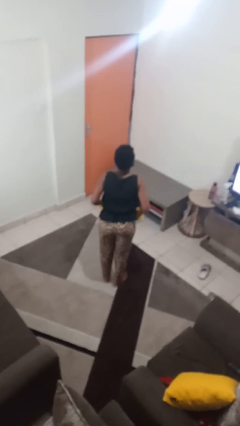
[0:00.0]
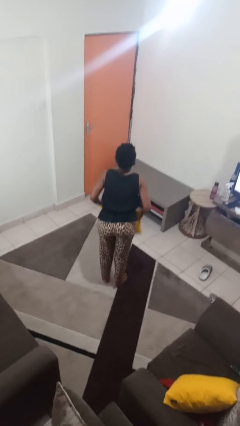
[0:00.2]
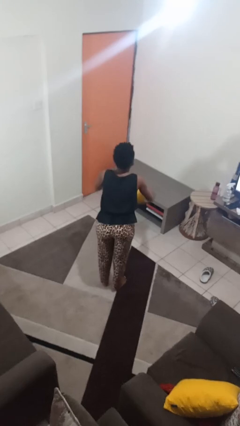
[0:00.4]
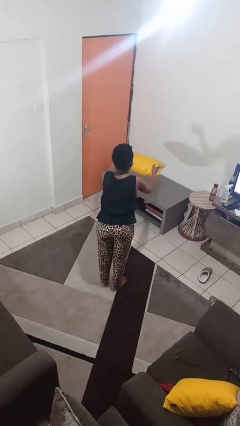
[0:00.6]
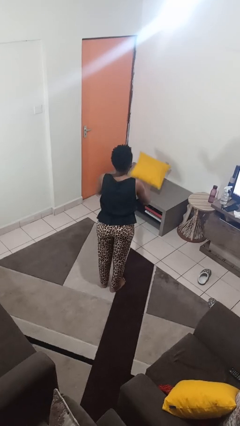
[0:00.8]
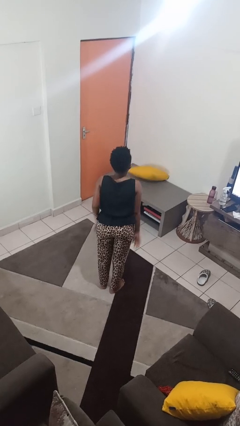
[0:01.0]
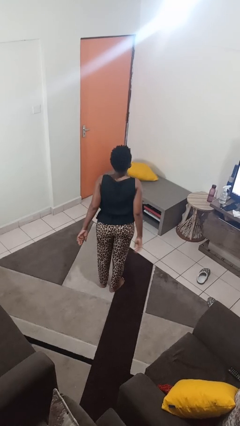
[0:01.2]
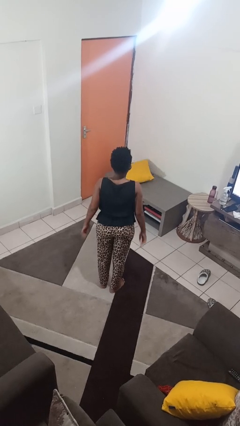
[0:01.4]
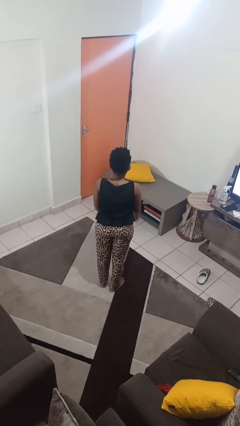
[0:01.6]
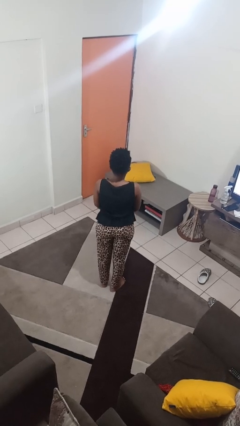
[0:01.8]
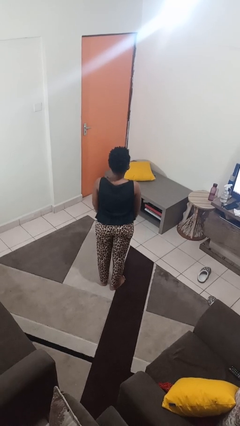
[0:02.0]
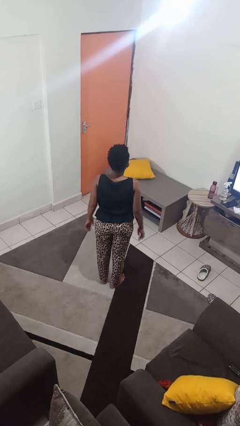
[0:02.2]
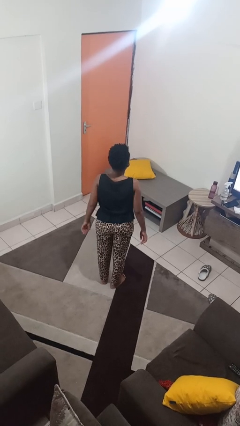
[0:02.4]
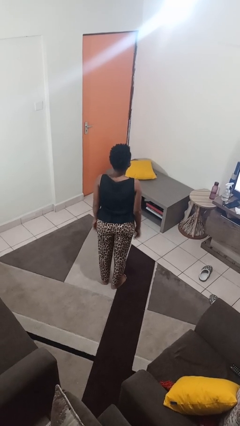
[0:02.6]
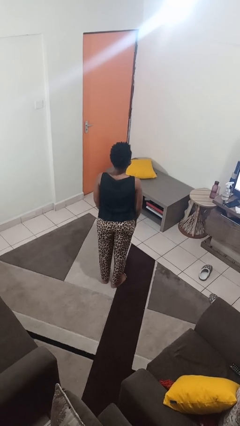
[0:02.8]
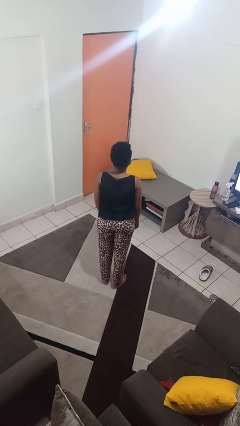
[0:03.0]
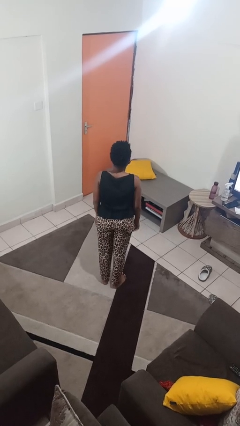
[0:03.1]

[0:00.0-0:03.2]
person throws object on table

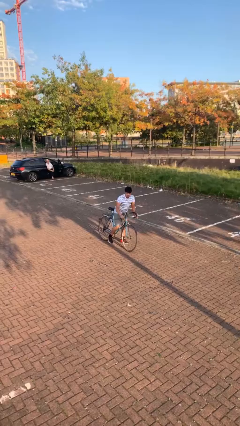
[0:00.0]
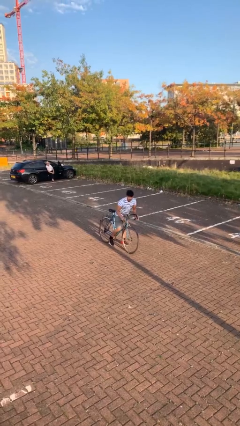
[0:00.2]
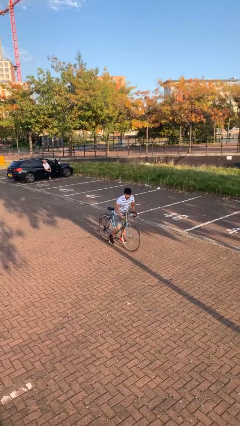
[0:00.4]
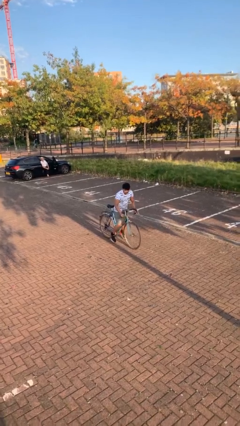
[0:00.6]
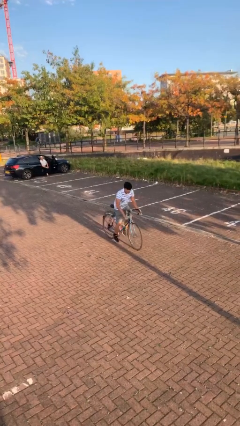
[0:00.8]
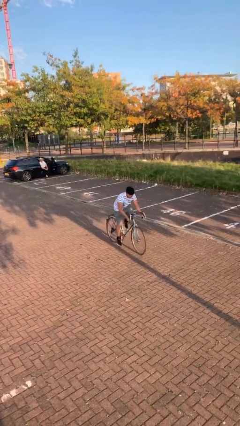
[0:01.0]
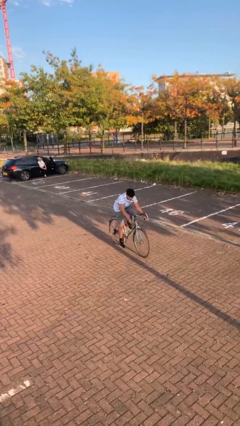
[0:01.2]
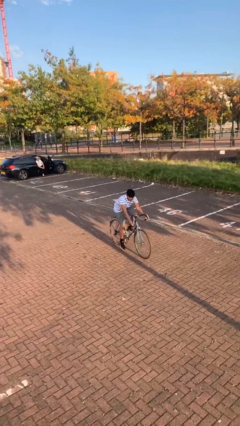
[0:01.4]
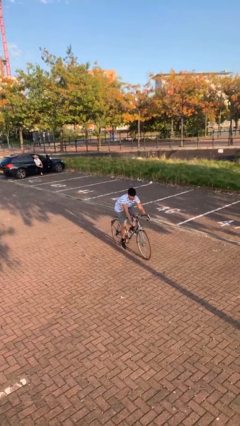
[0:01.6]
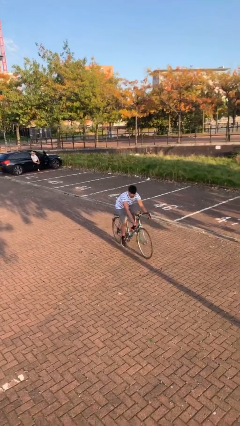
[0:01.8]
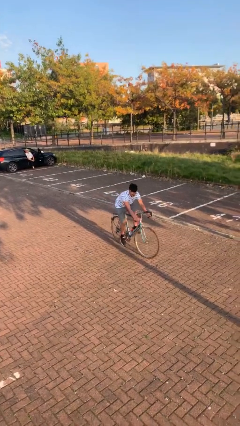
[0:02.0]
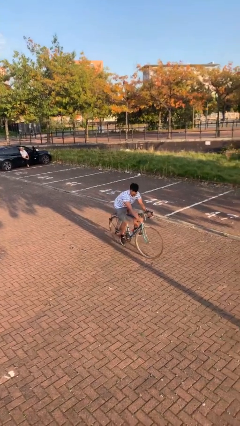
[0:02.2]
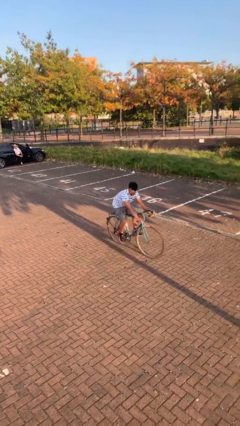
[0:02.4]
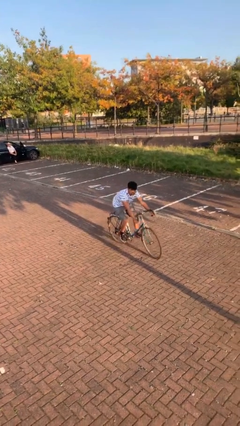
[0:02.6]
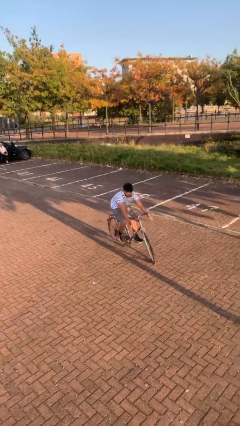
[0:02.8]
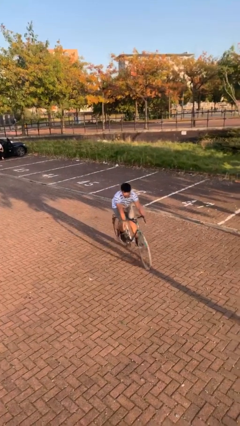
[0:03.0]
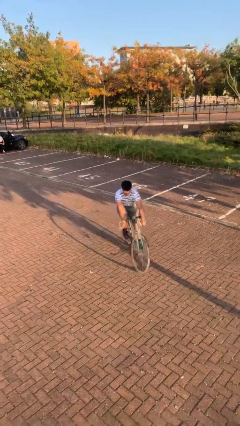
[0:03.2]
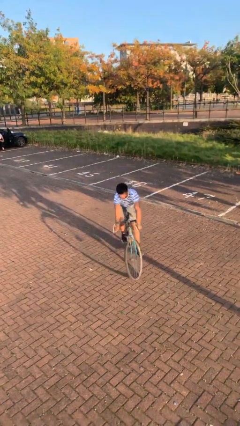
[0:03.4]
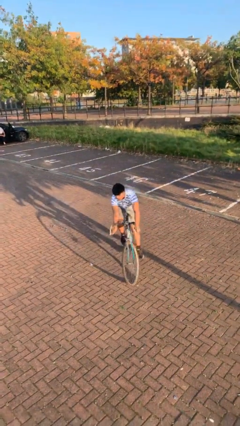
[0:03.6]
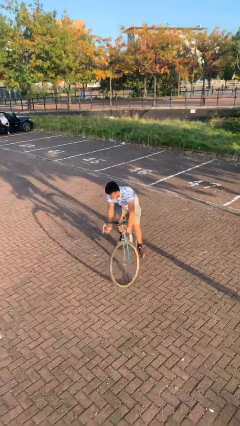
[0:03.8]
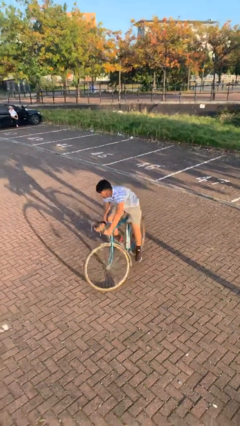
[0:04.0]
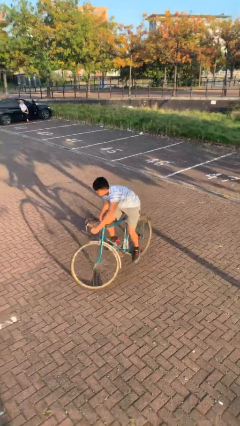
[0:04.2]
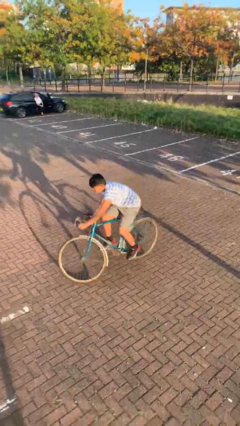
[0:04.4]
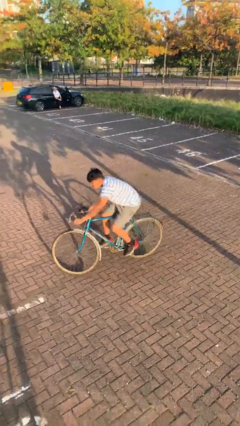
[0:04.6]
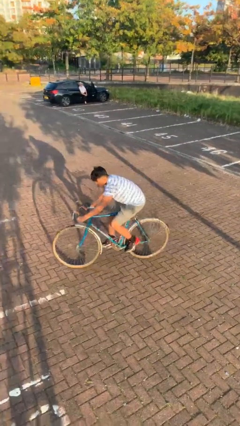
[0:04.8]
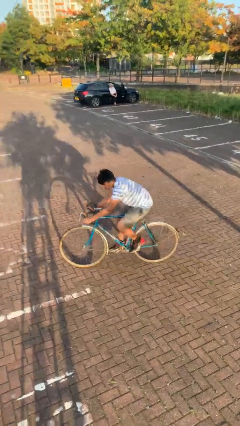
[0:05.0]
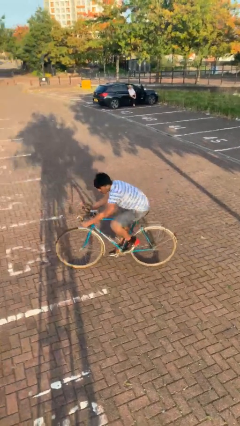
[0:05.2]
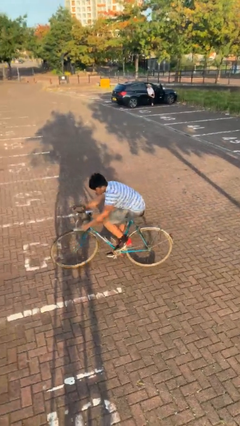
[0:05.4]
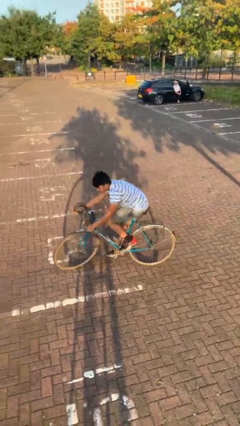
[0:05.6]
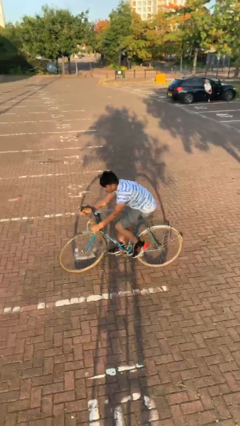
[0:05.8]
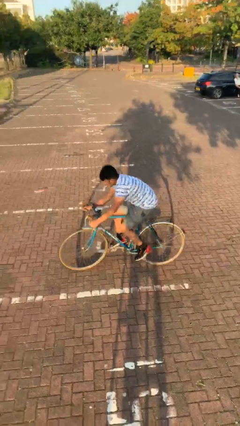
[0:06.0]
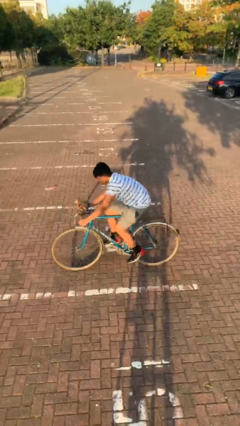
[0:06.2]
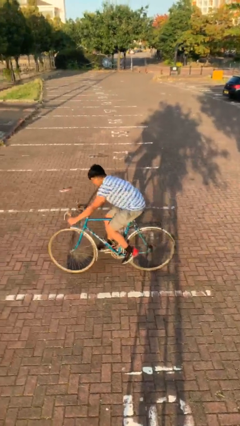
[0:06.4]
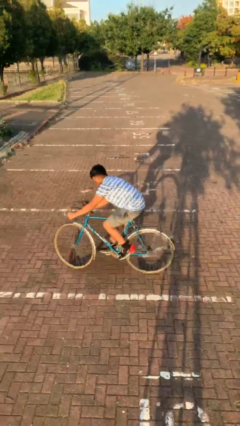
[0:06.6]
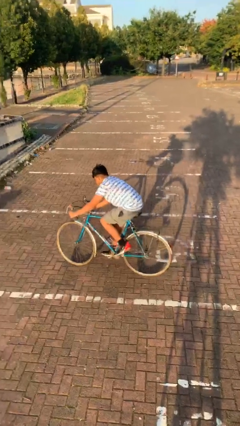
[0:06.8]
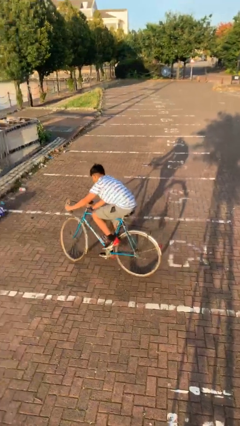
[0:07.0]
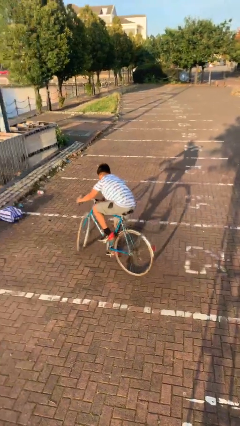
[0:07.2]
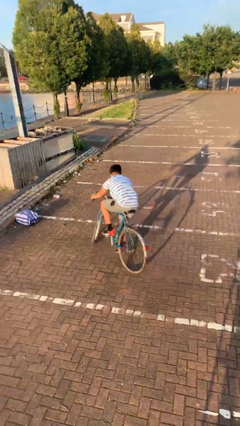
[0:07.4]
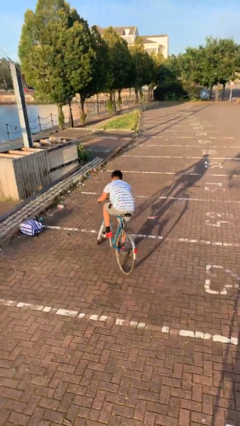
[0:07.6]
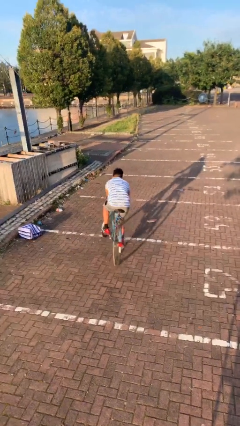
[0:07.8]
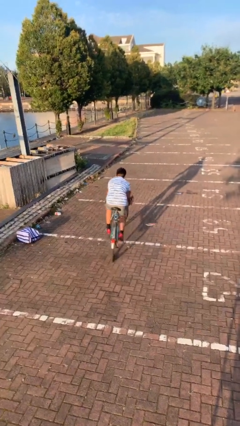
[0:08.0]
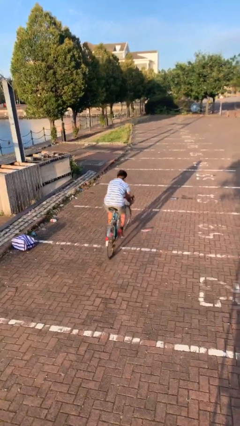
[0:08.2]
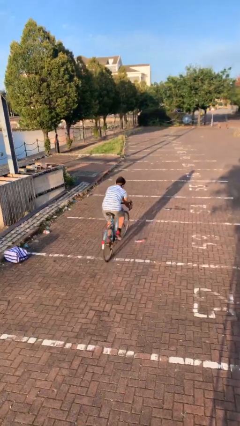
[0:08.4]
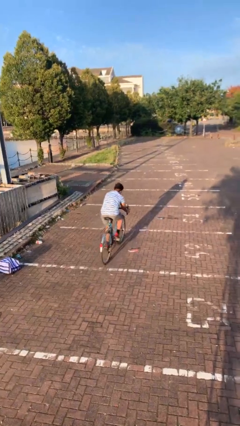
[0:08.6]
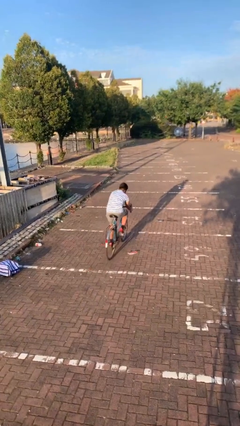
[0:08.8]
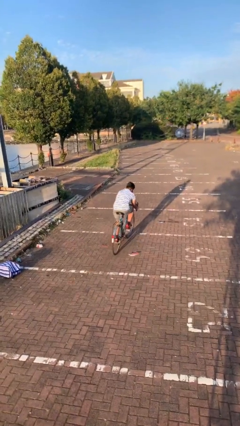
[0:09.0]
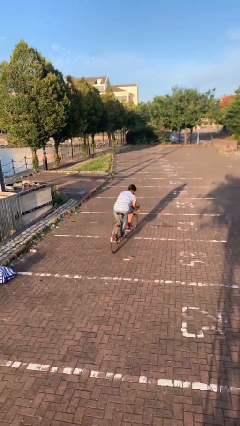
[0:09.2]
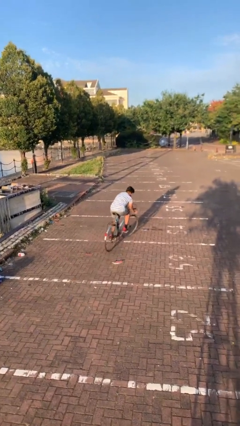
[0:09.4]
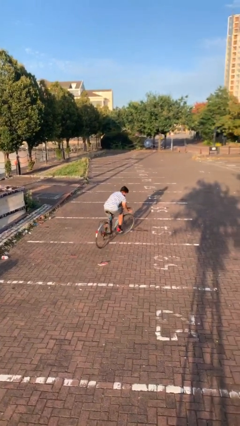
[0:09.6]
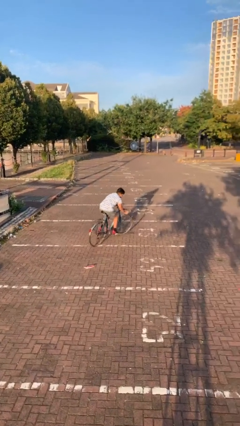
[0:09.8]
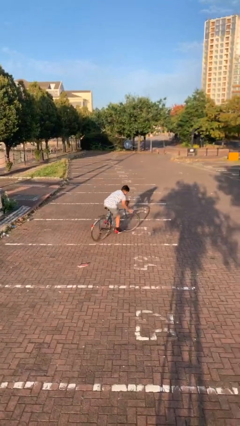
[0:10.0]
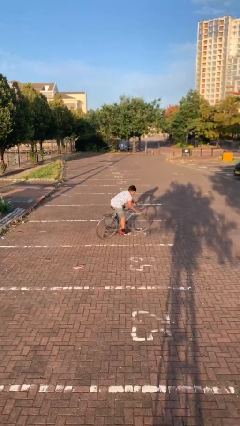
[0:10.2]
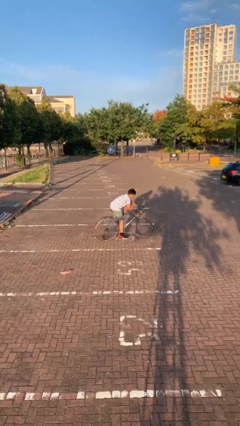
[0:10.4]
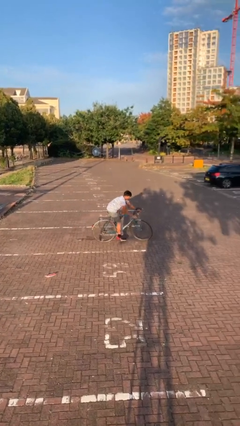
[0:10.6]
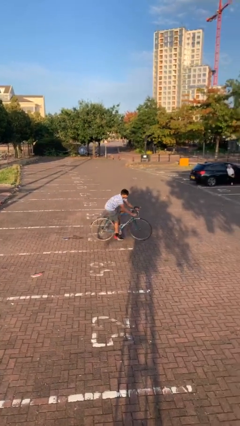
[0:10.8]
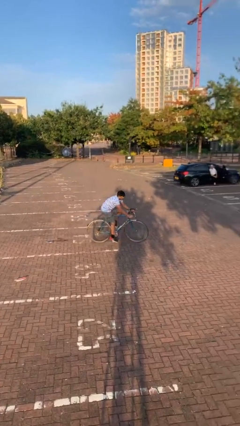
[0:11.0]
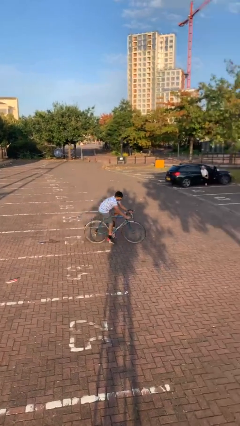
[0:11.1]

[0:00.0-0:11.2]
person rides bicycle

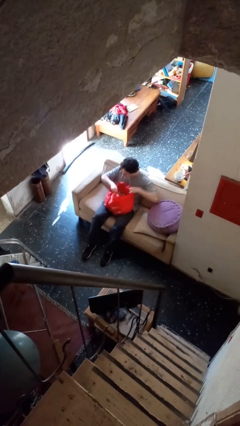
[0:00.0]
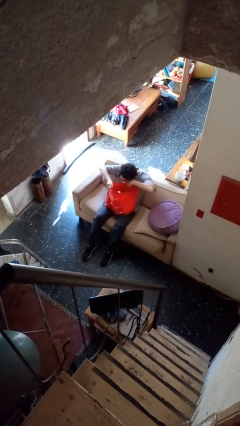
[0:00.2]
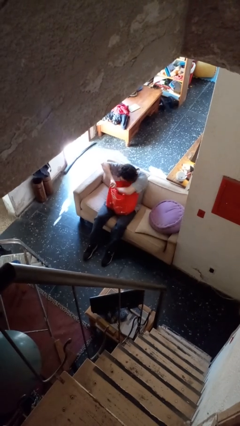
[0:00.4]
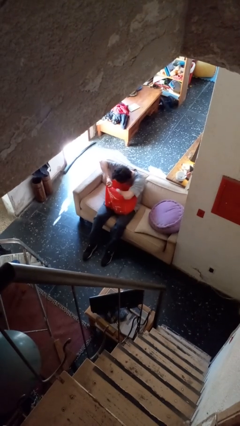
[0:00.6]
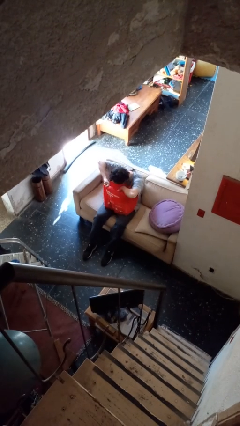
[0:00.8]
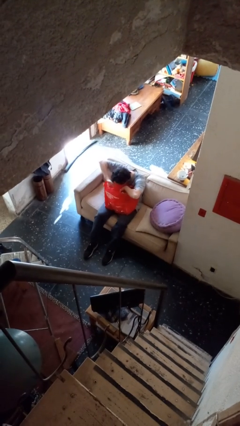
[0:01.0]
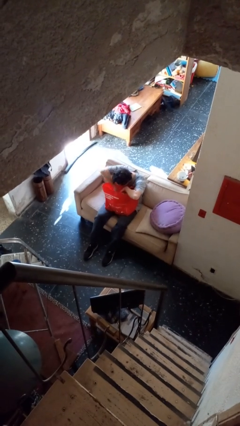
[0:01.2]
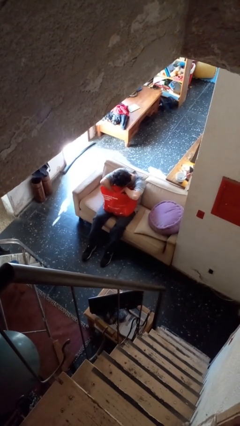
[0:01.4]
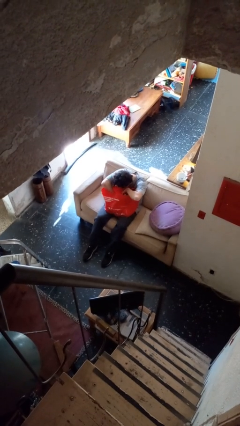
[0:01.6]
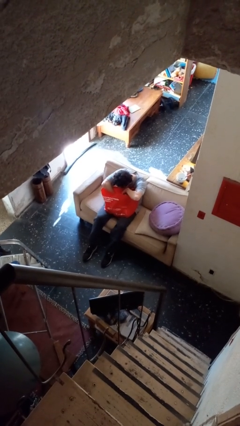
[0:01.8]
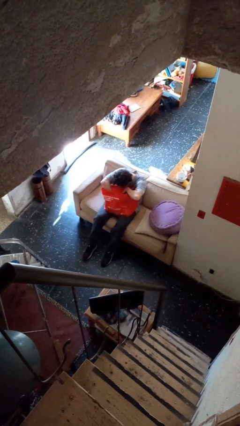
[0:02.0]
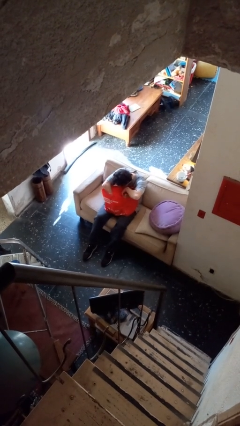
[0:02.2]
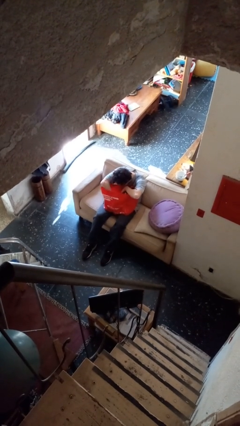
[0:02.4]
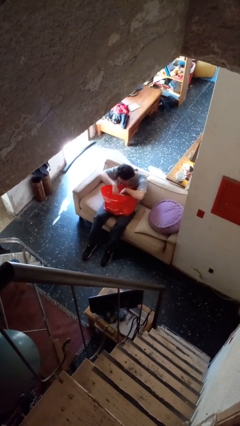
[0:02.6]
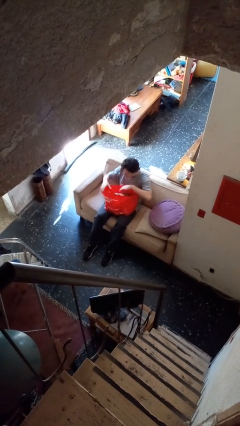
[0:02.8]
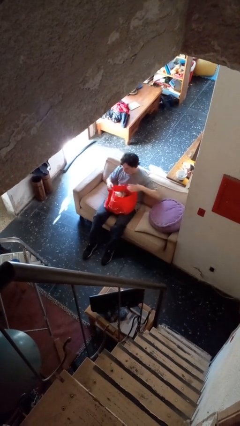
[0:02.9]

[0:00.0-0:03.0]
person searches in bag

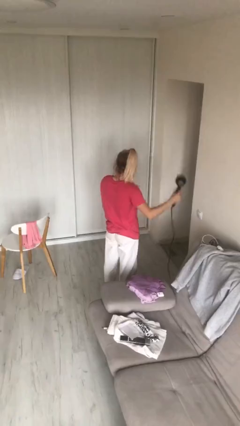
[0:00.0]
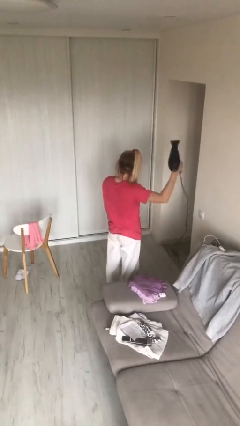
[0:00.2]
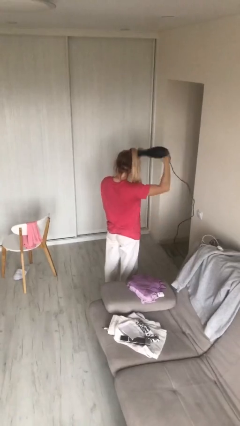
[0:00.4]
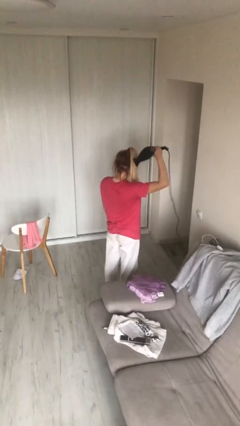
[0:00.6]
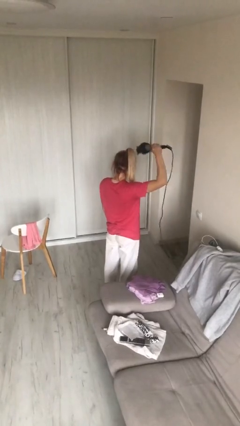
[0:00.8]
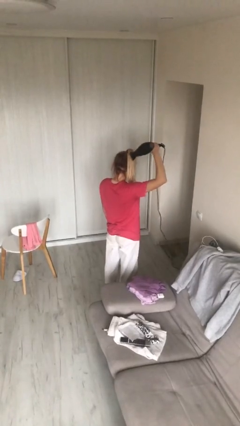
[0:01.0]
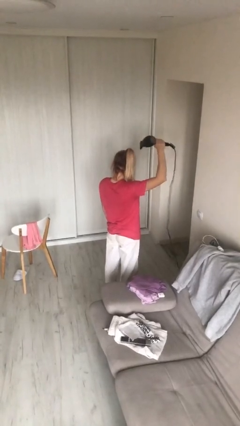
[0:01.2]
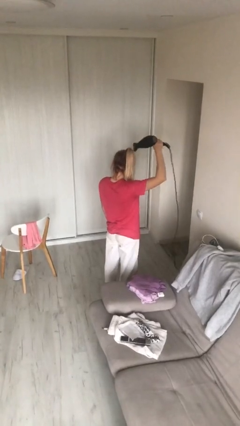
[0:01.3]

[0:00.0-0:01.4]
person dries hair with hairdryer
